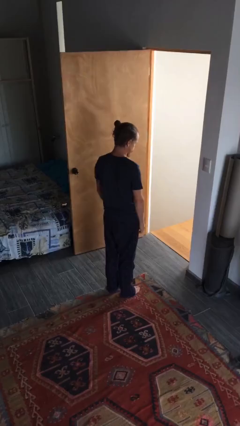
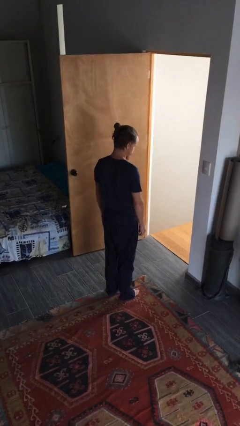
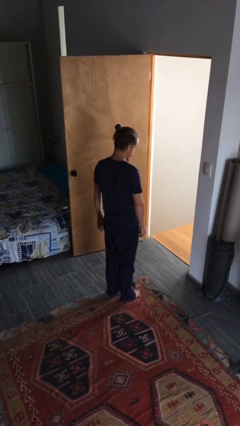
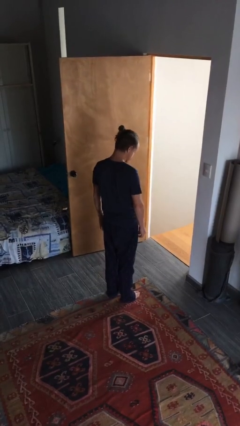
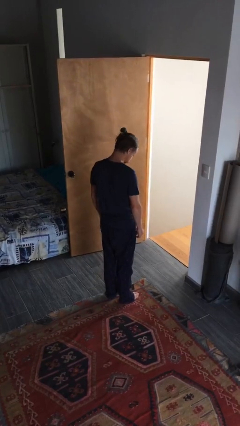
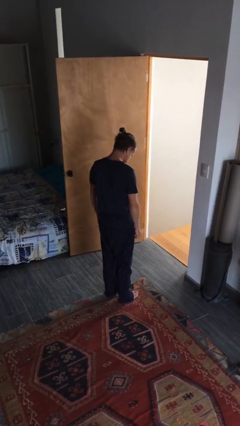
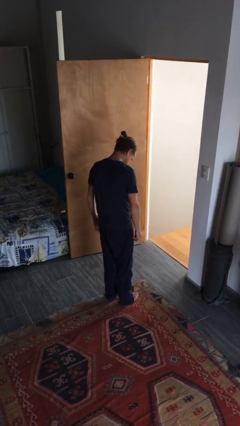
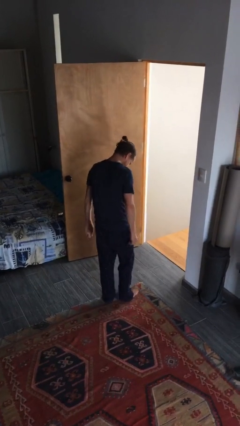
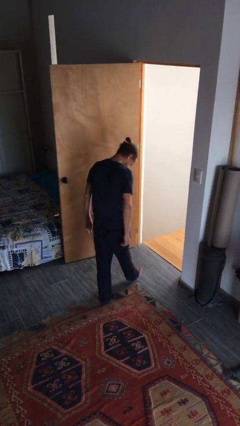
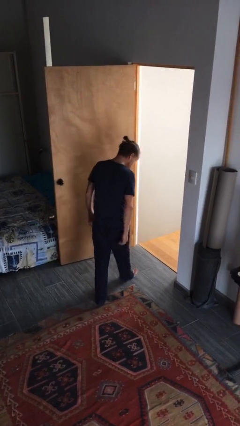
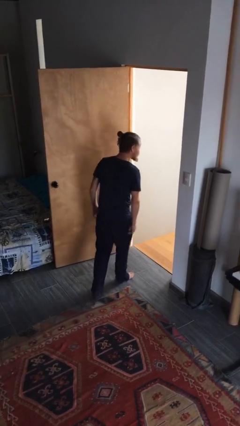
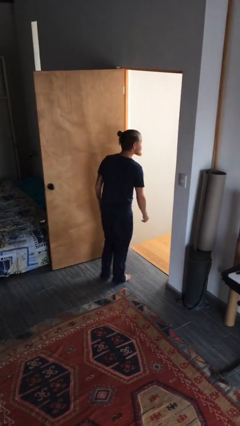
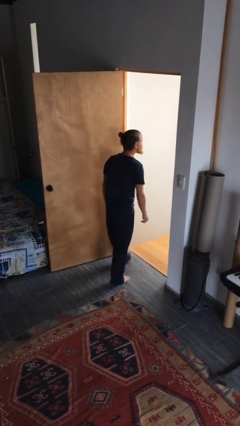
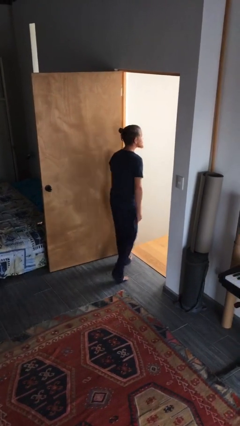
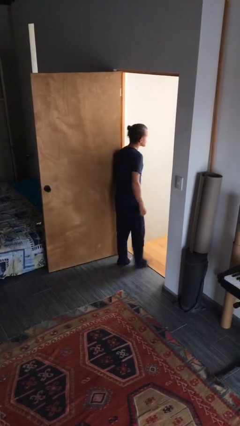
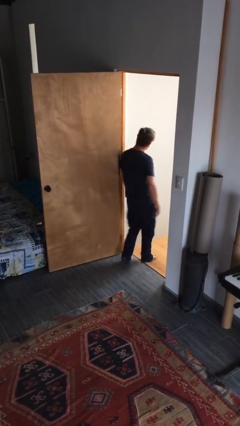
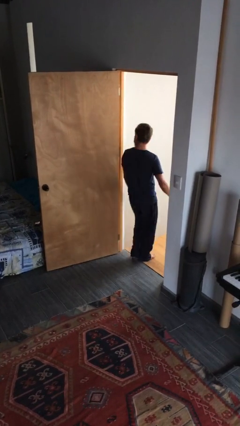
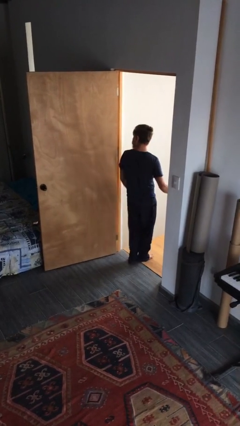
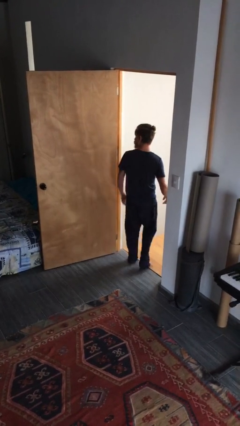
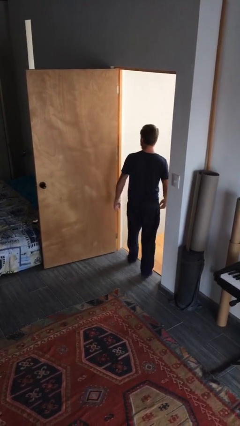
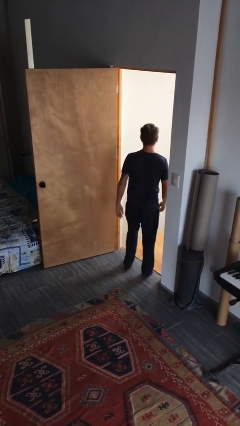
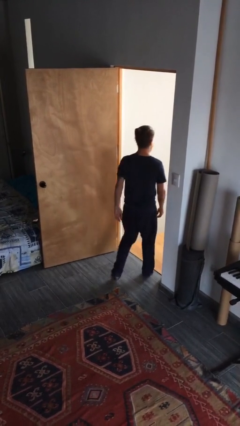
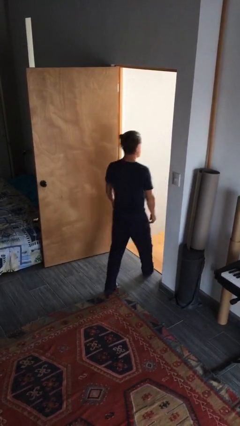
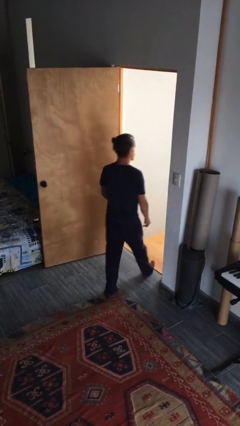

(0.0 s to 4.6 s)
person bumps into wall

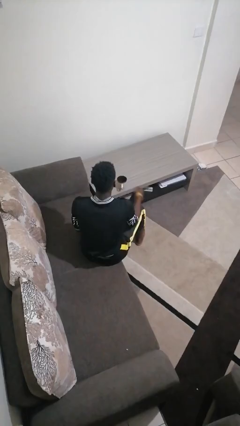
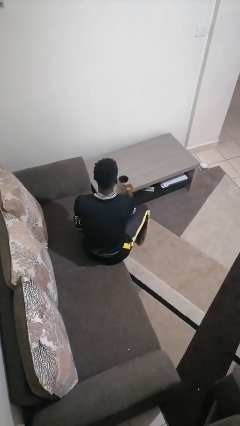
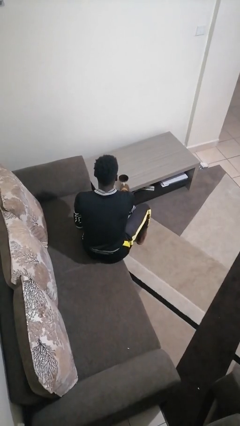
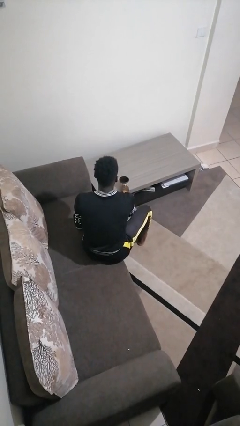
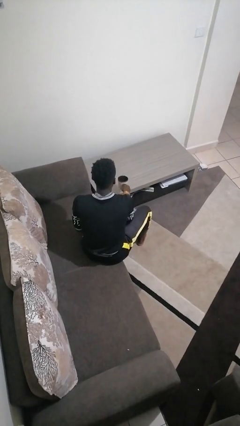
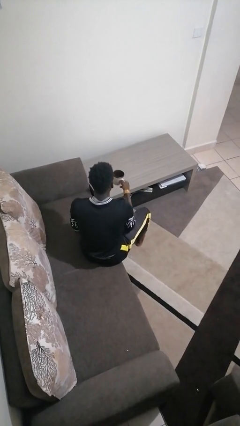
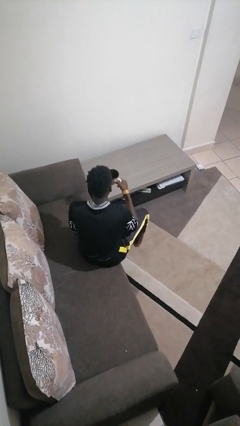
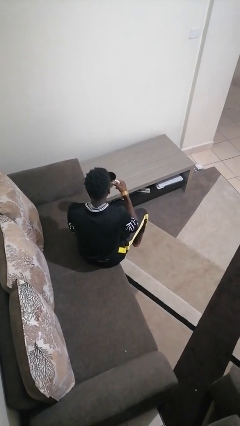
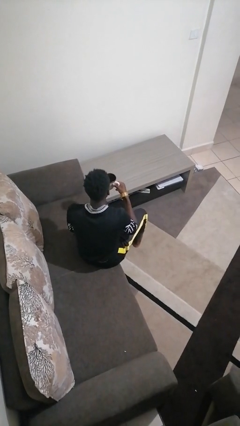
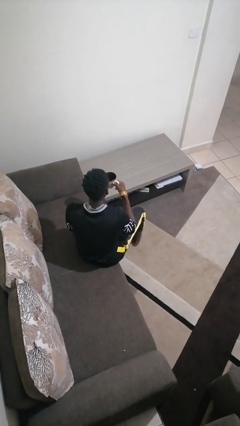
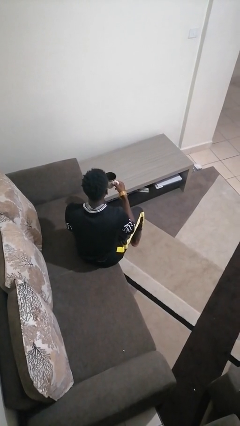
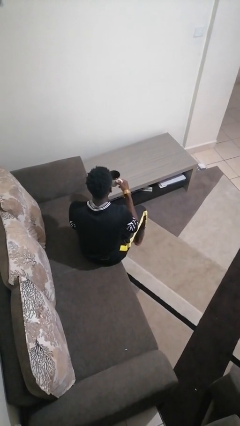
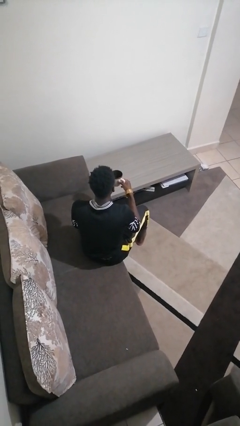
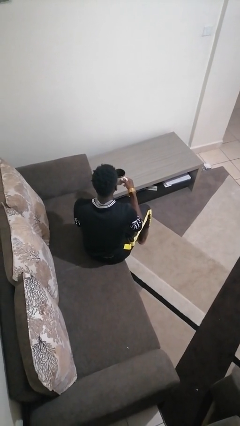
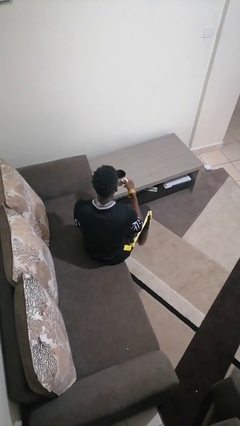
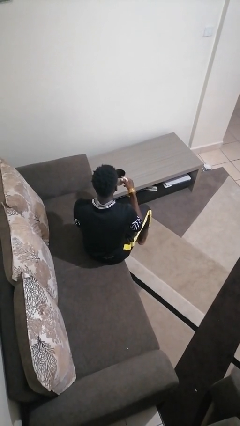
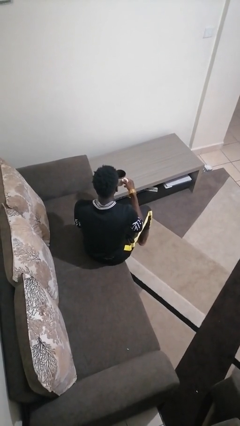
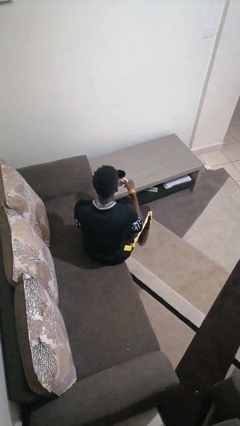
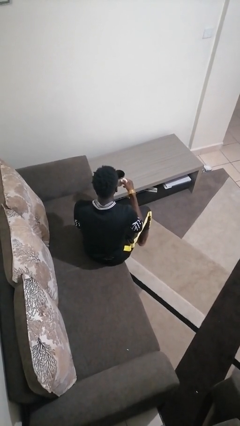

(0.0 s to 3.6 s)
person picks up object from table

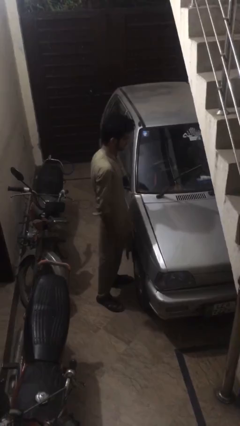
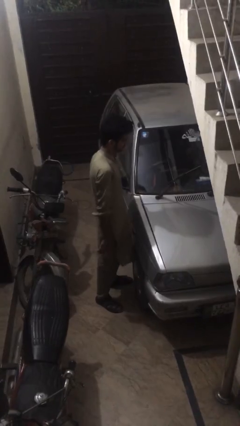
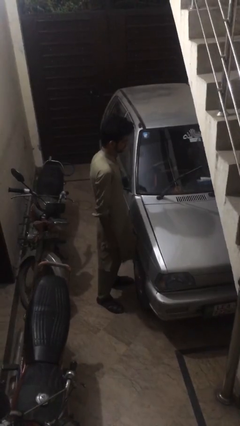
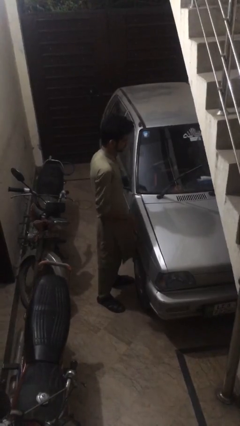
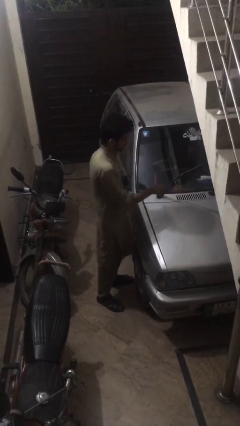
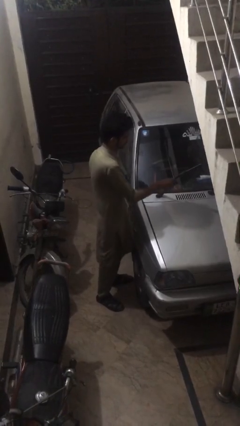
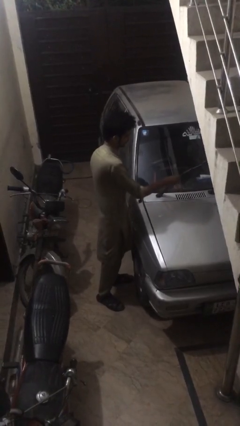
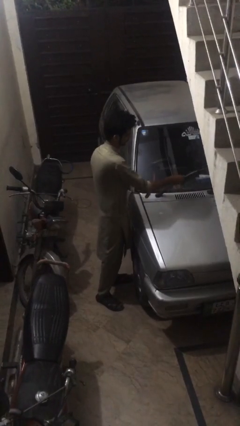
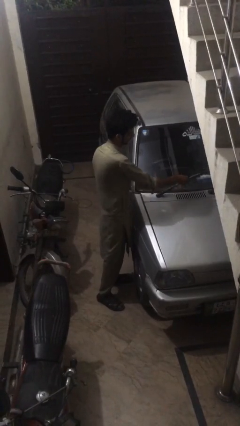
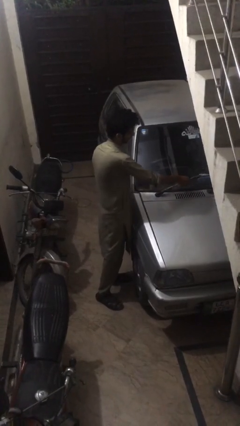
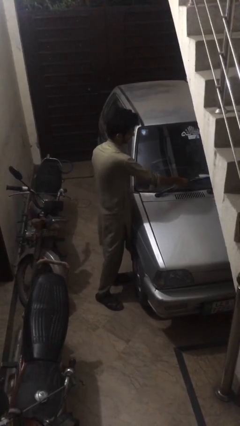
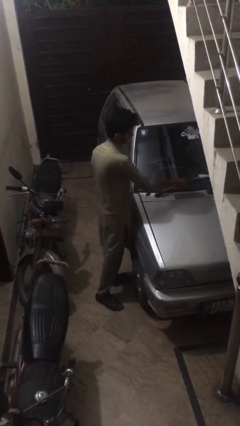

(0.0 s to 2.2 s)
person flips down car wipers

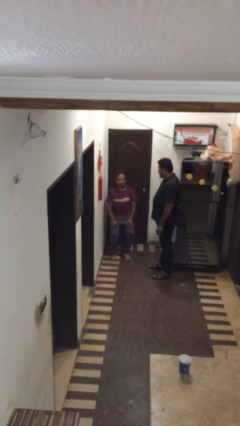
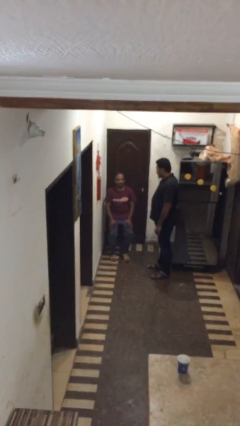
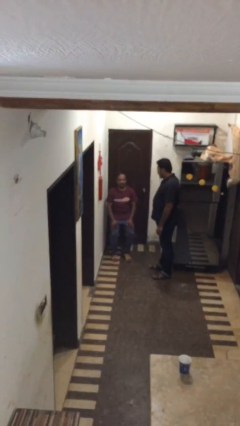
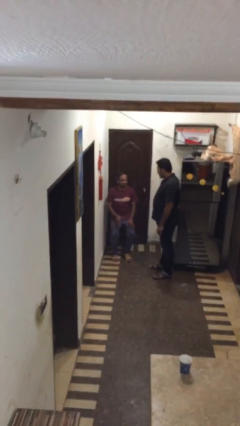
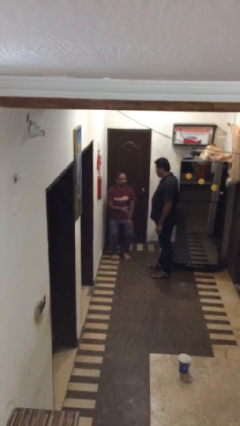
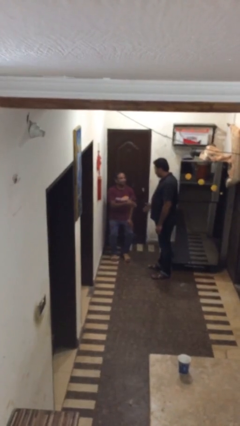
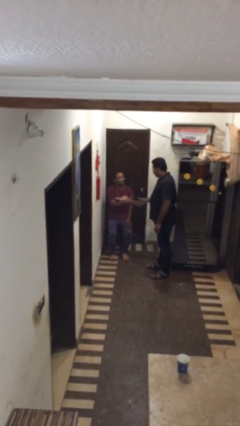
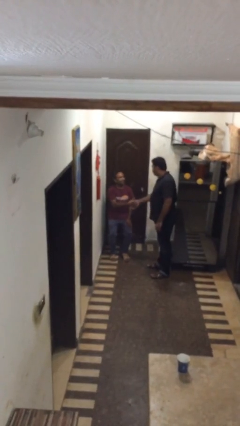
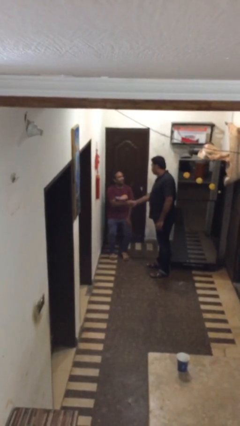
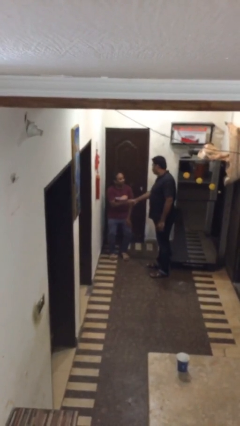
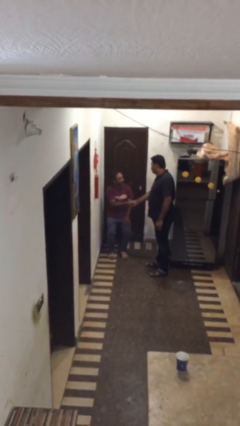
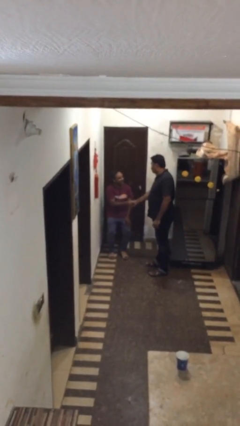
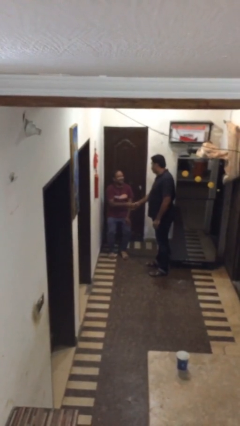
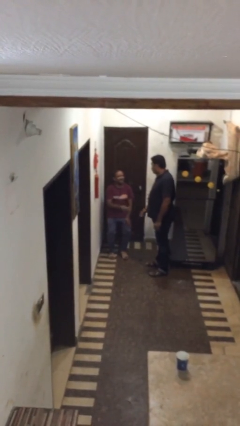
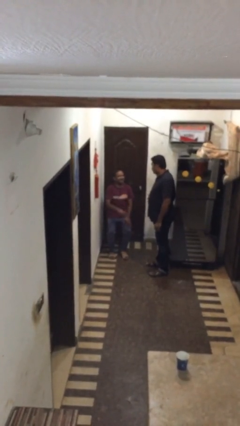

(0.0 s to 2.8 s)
person shakes hand

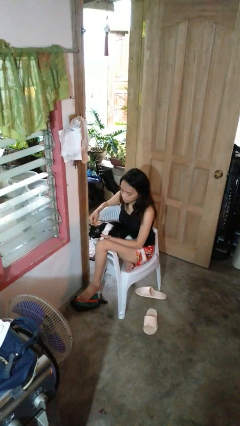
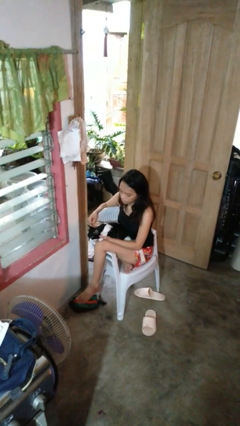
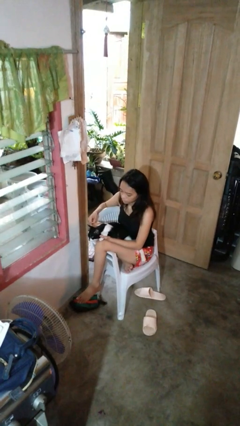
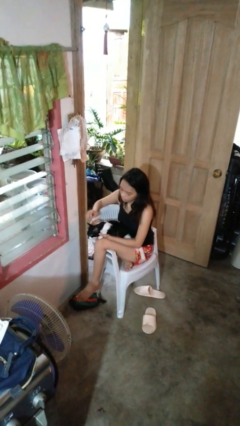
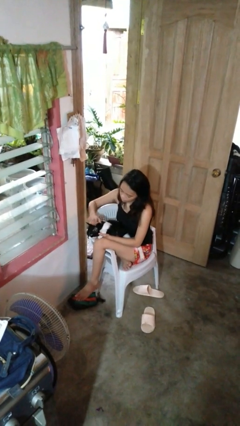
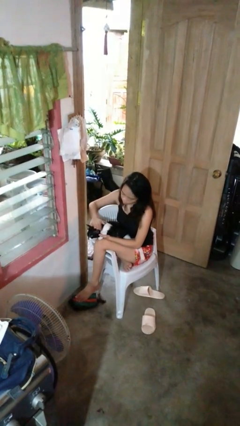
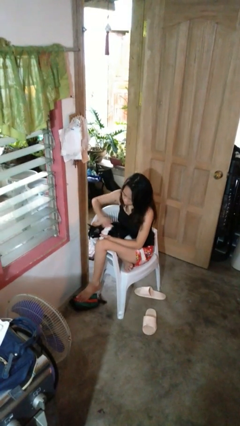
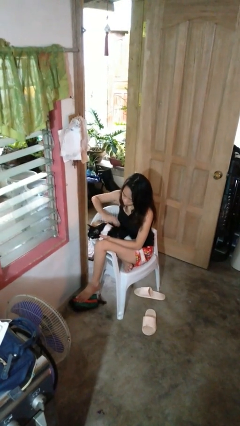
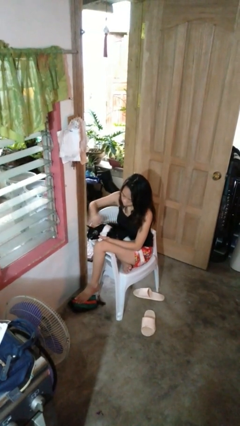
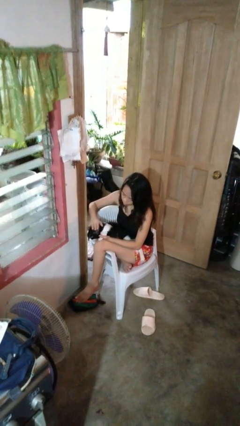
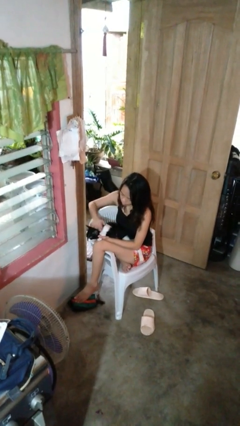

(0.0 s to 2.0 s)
person pets cat

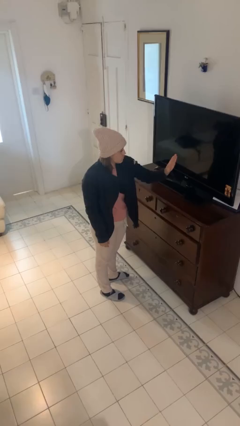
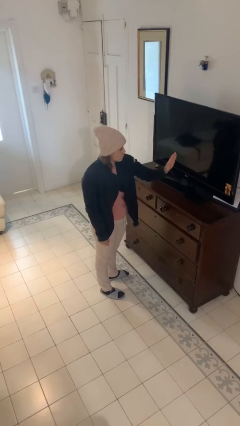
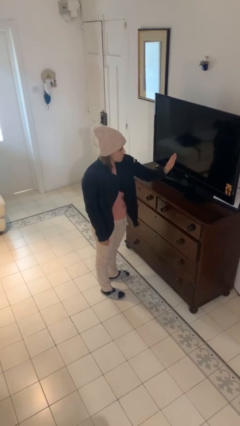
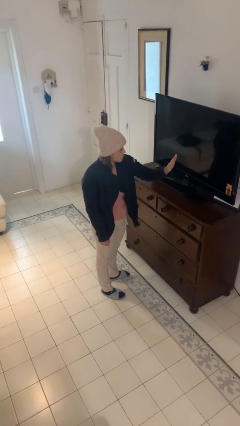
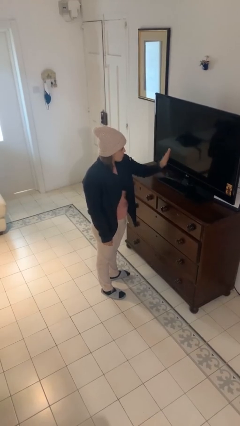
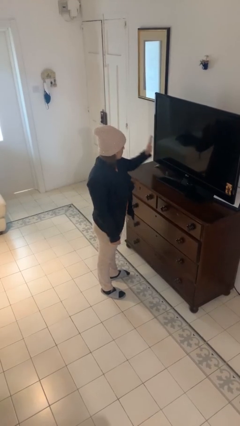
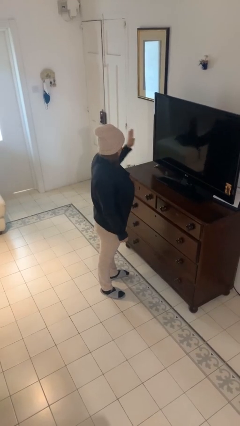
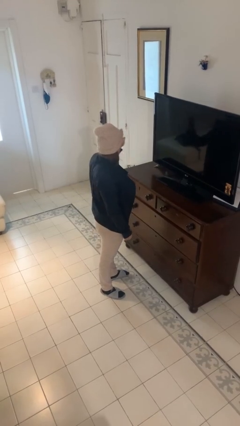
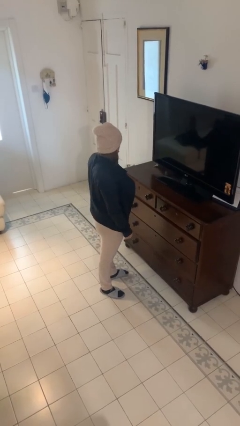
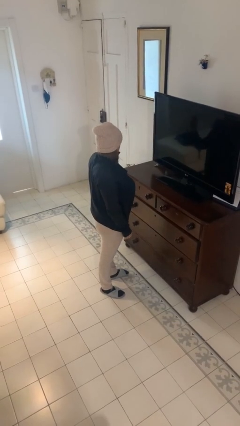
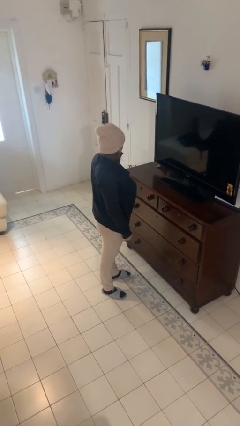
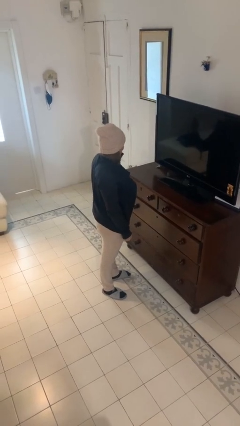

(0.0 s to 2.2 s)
person gestures swipe right
